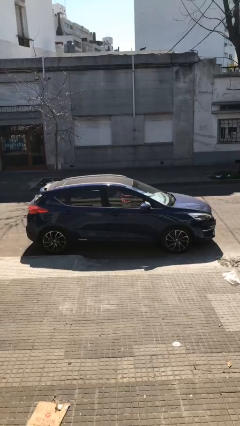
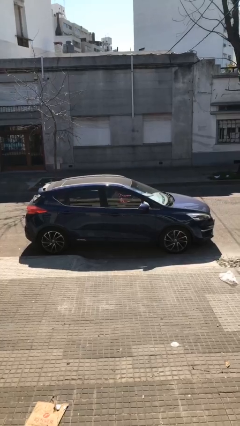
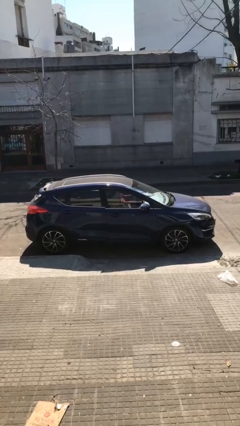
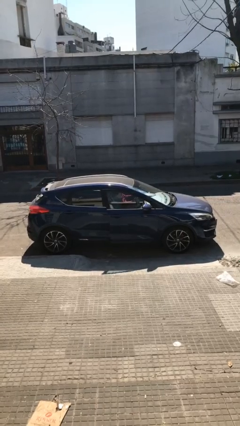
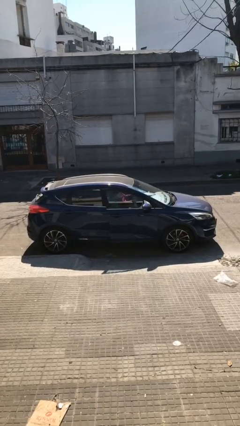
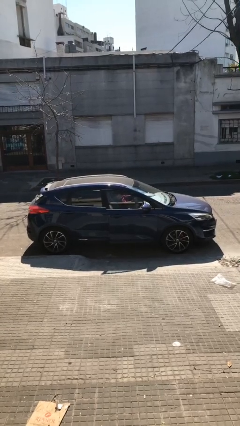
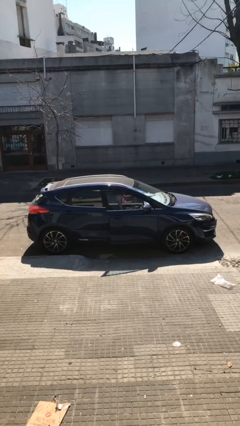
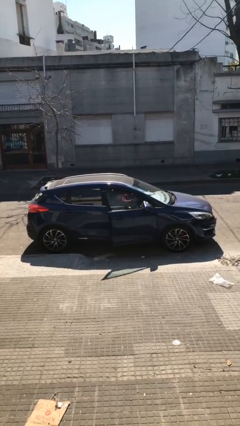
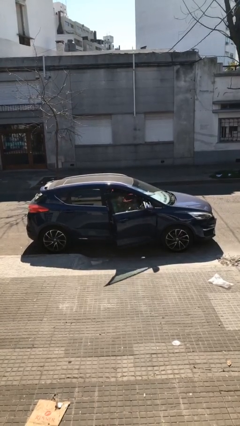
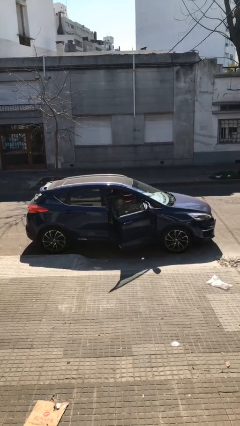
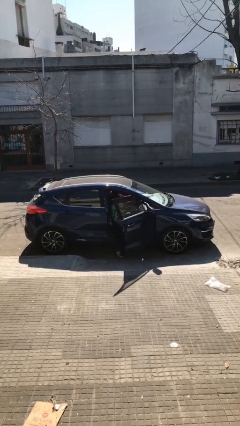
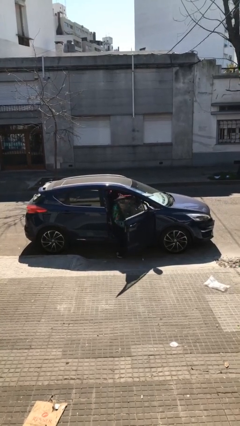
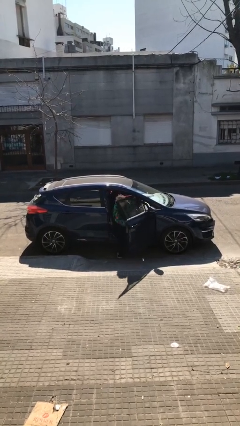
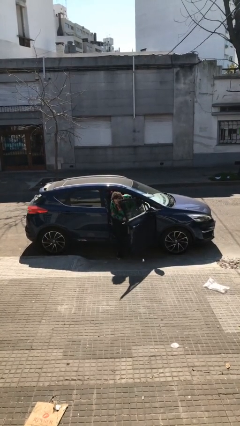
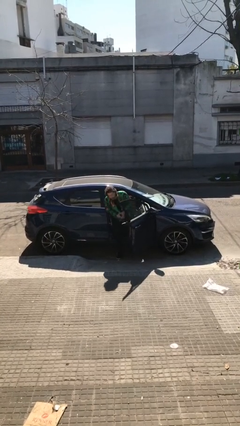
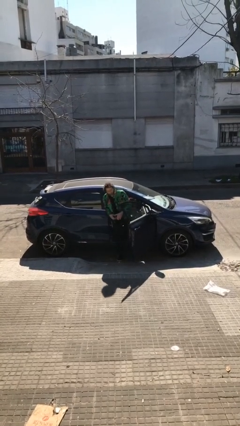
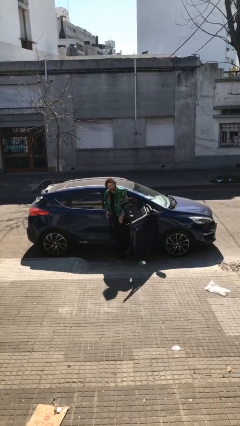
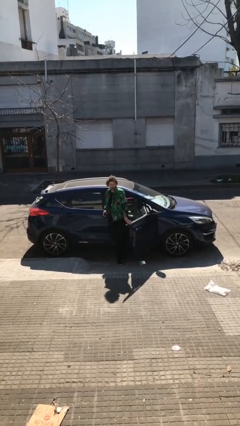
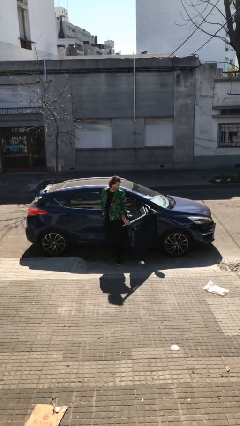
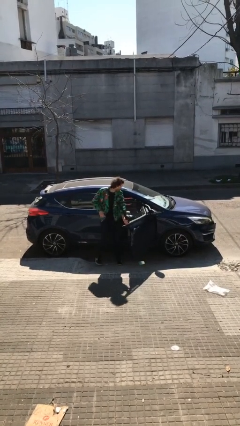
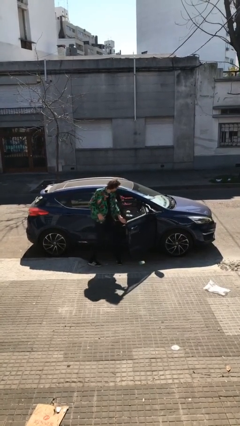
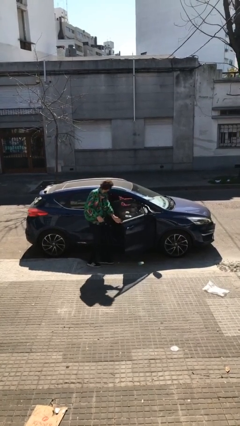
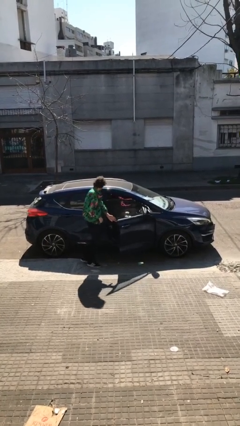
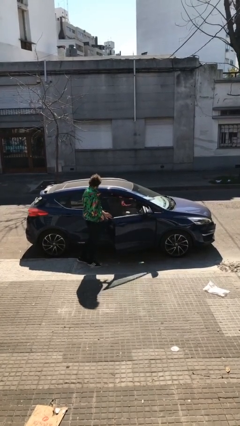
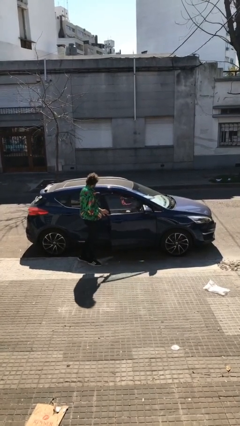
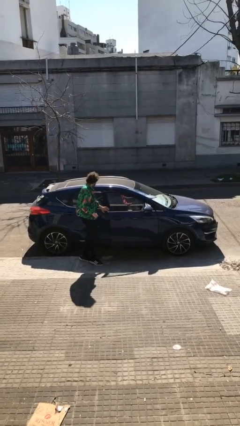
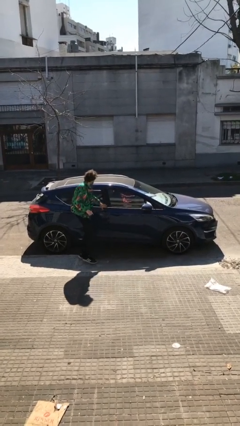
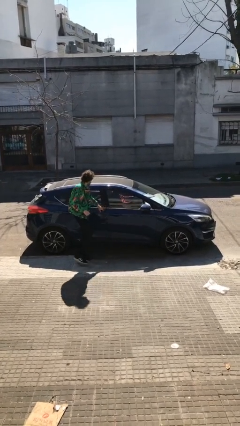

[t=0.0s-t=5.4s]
car drops off person

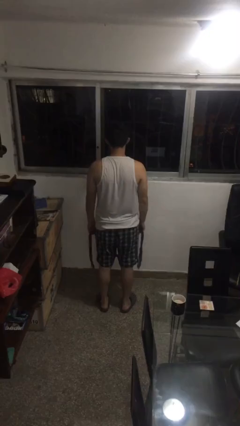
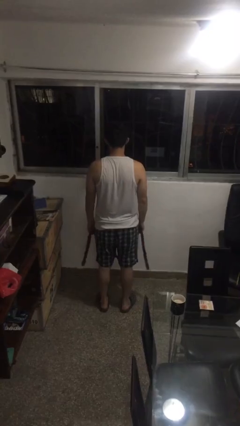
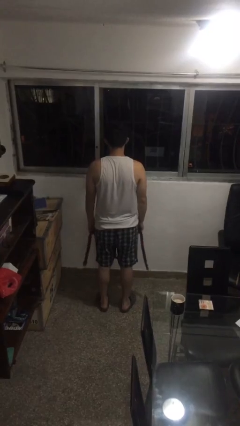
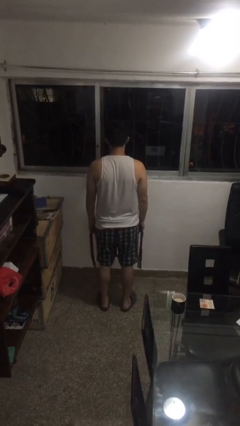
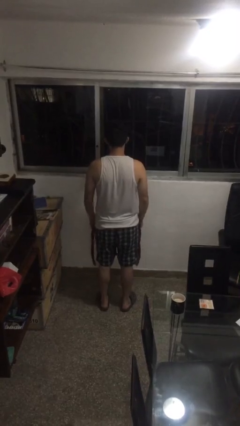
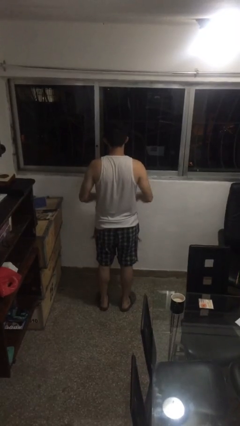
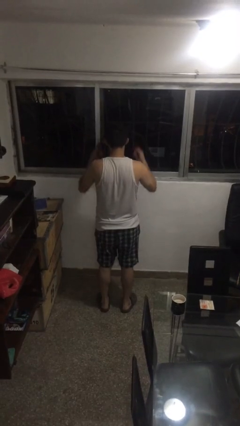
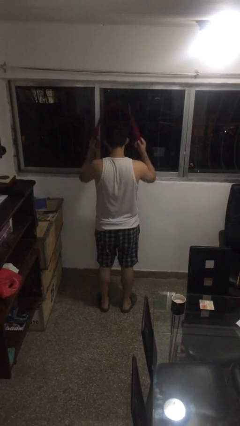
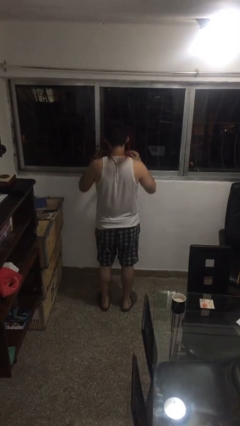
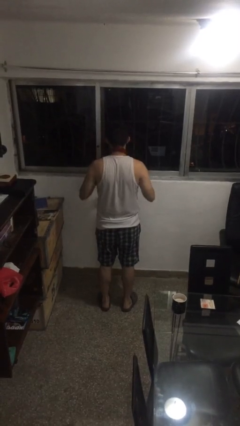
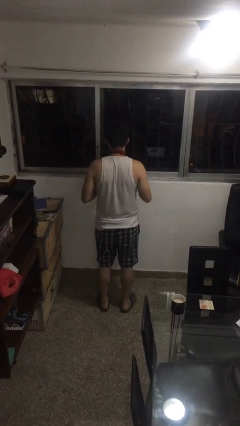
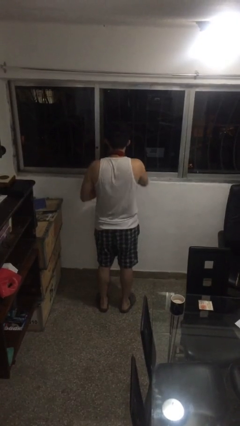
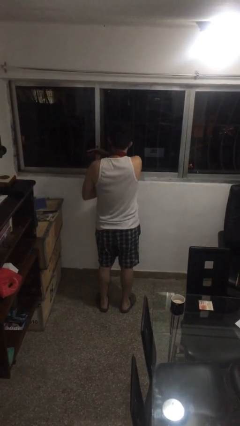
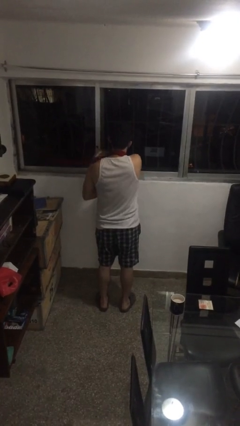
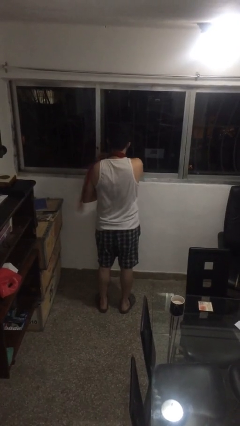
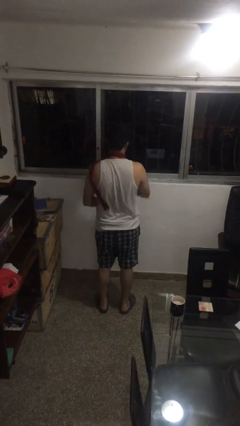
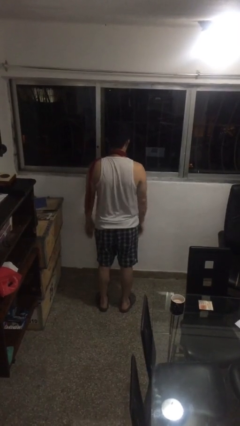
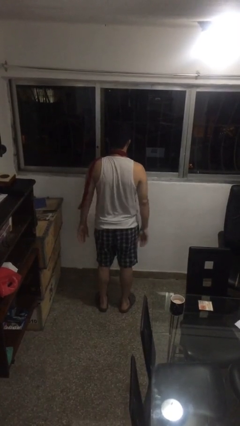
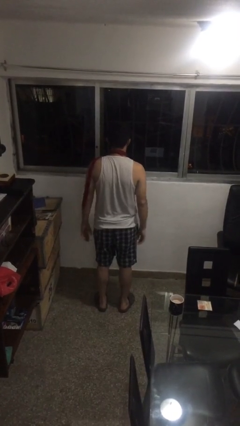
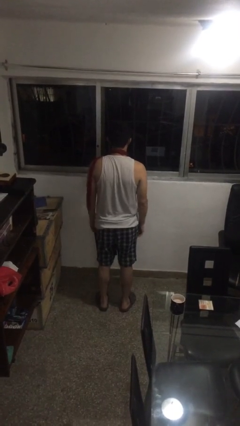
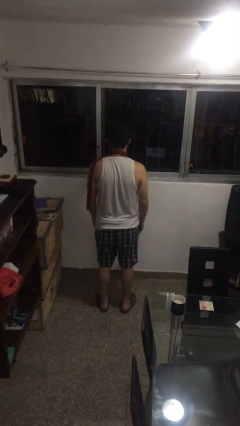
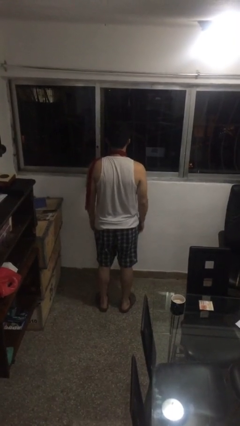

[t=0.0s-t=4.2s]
person puts on scarf

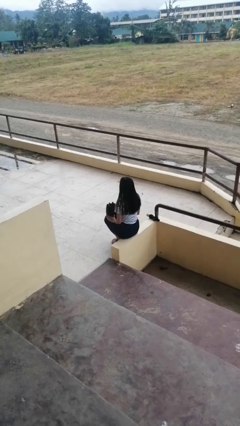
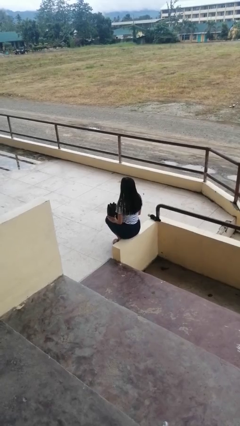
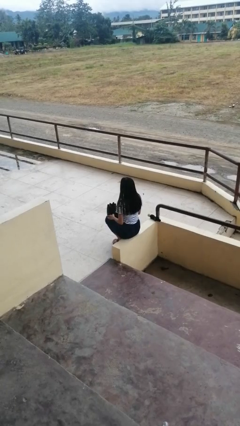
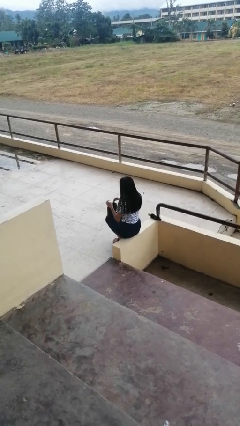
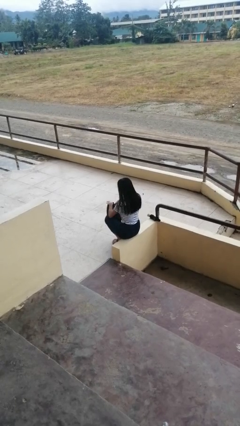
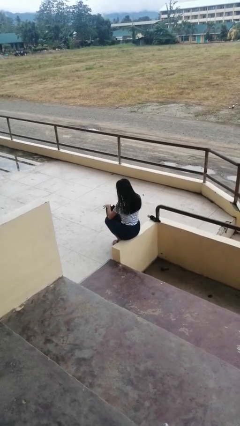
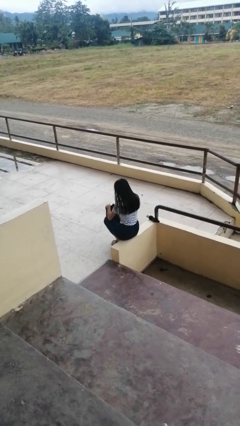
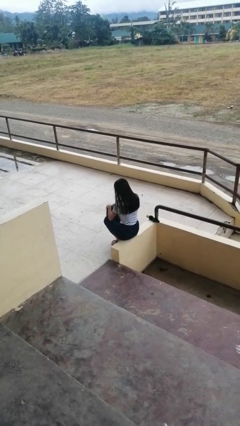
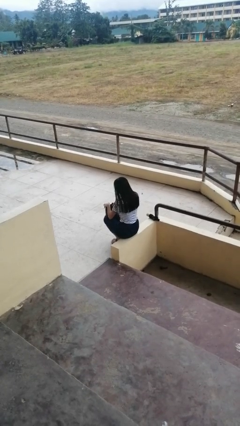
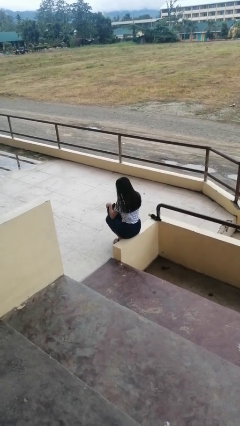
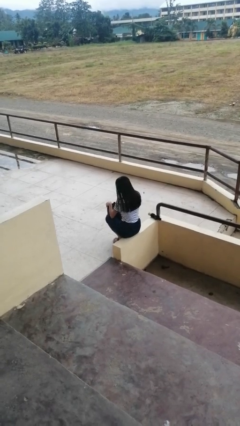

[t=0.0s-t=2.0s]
person searches in bag

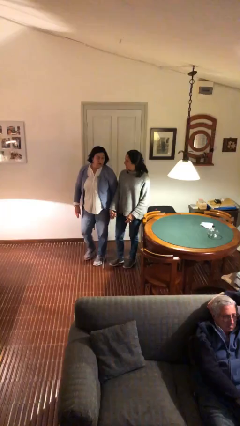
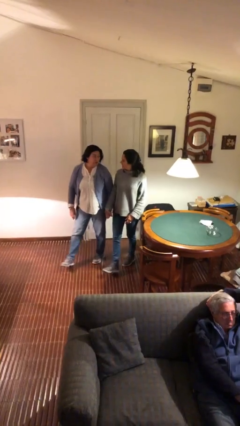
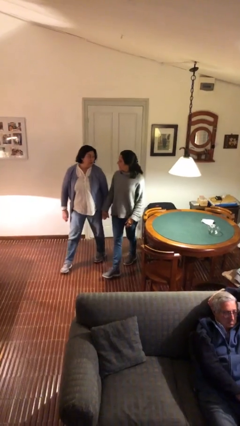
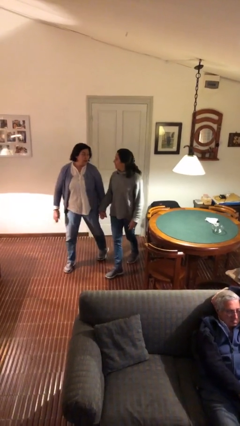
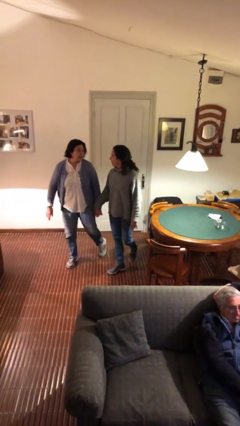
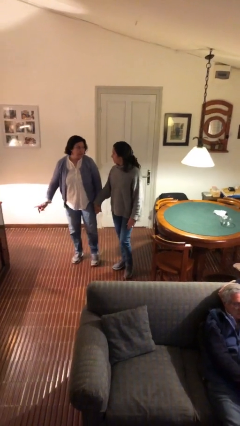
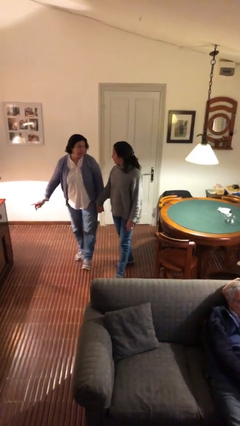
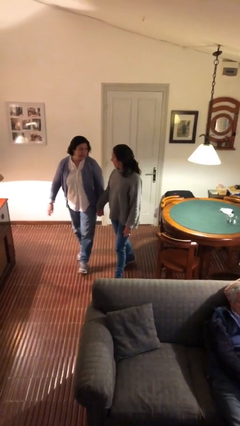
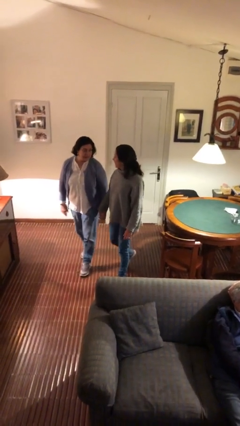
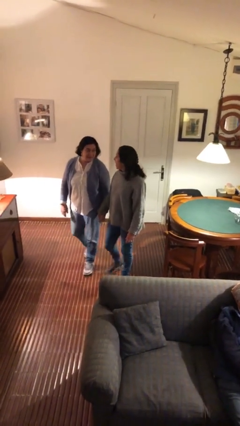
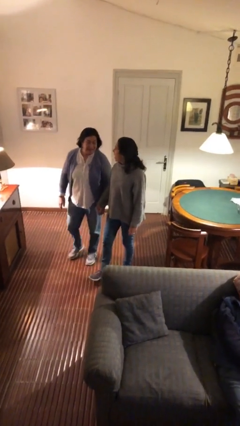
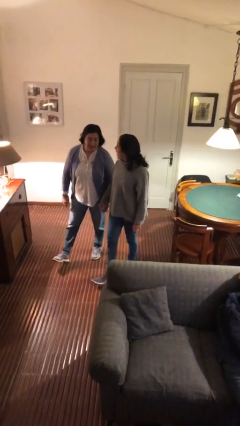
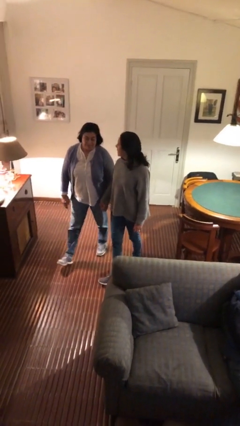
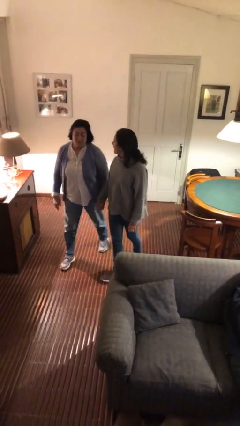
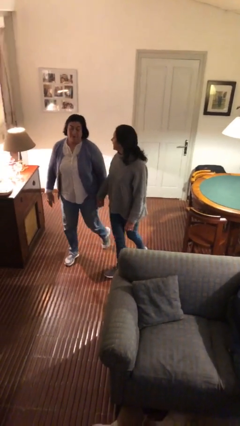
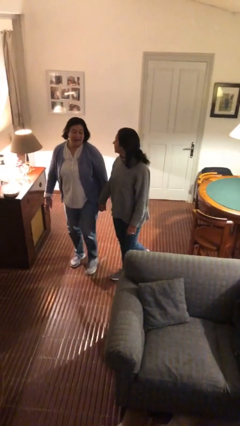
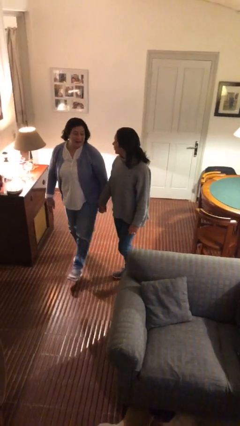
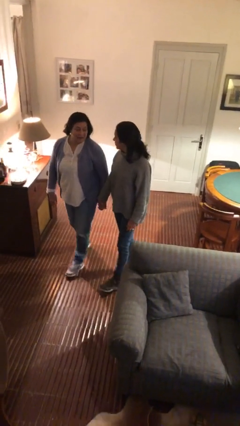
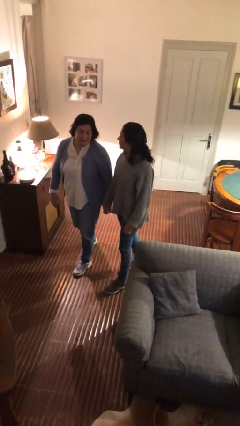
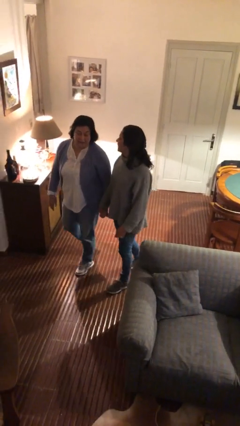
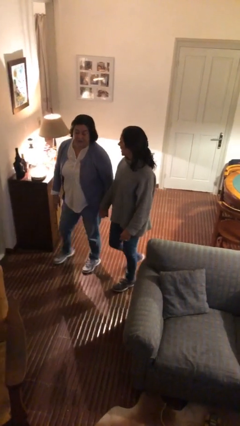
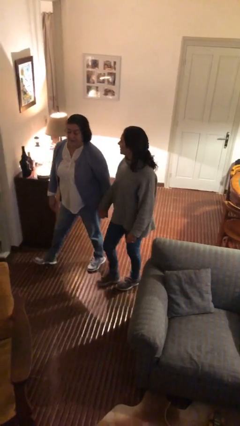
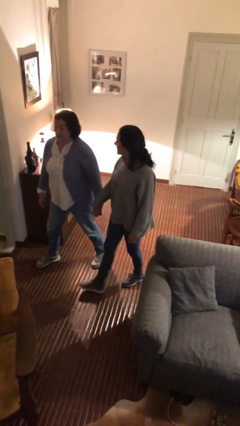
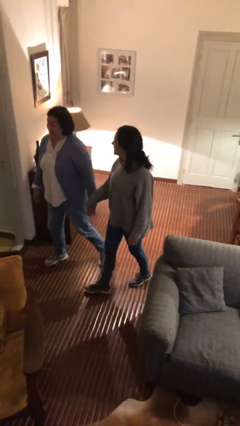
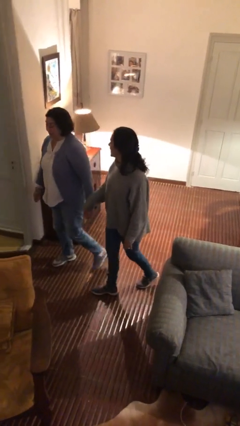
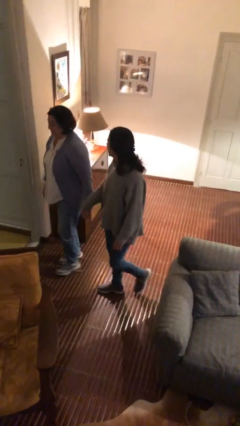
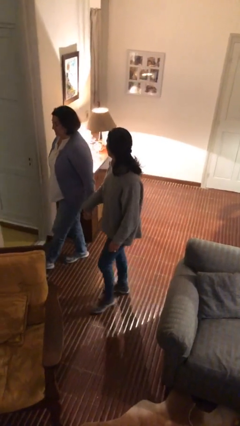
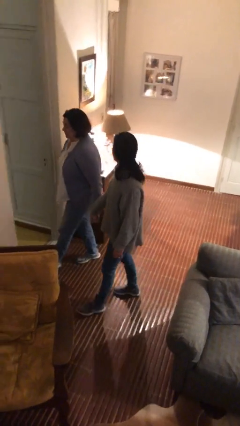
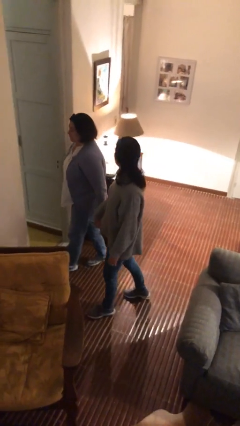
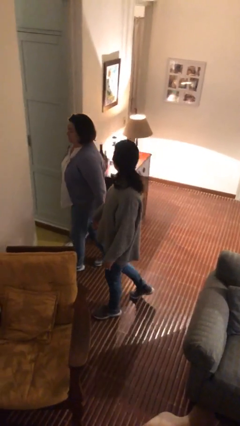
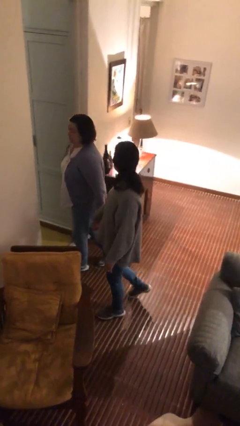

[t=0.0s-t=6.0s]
person holds hand
